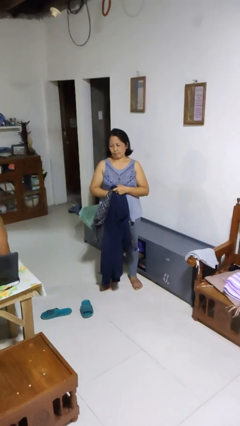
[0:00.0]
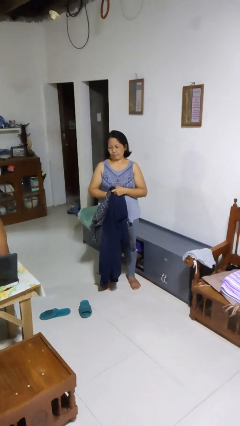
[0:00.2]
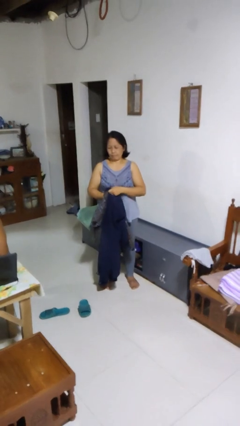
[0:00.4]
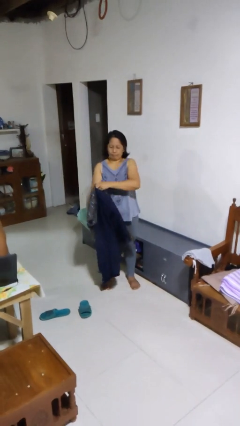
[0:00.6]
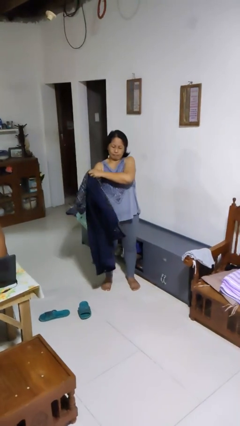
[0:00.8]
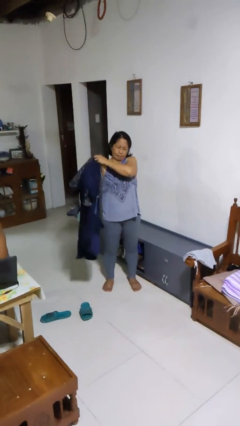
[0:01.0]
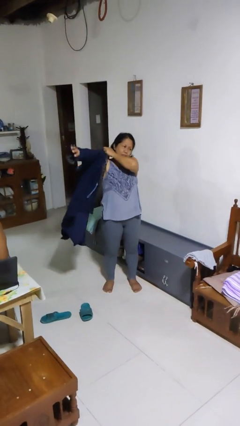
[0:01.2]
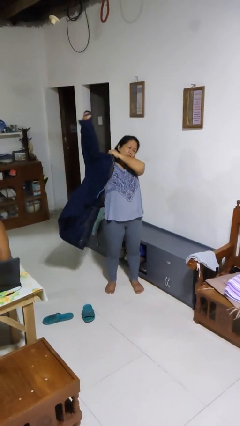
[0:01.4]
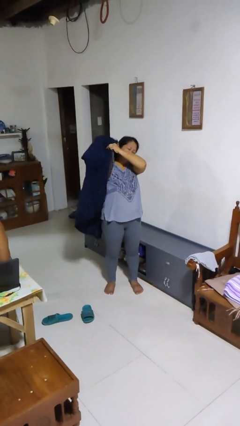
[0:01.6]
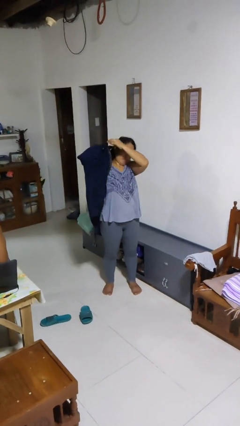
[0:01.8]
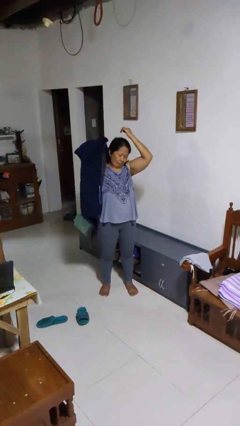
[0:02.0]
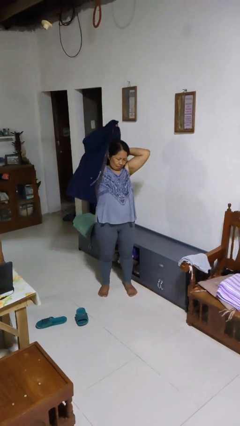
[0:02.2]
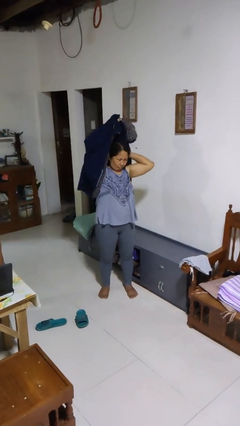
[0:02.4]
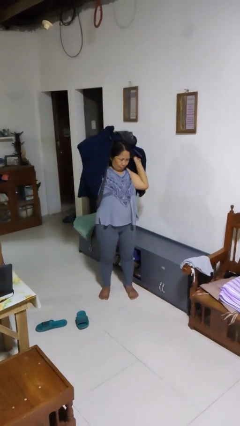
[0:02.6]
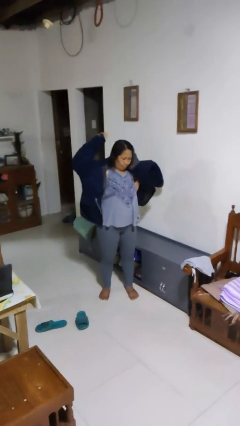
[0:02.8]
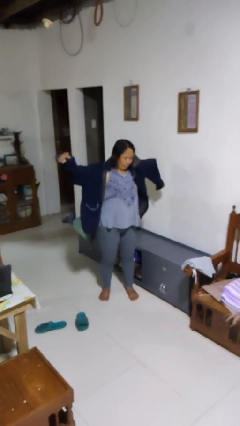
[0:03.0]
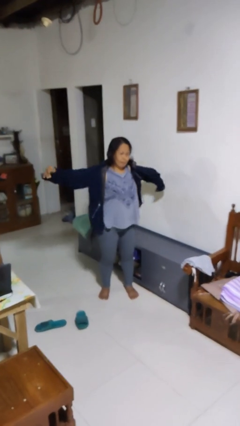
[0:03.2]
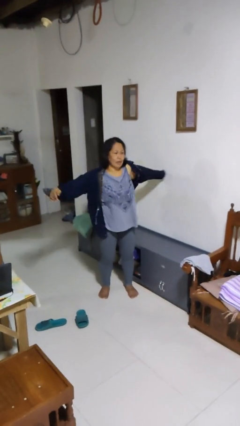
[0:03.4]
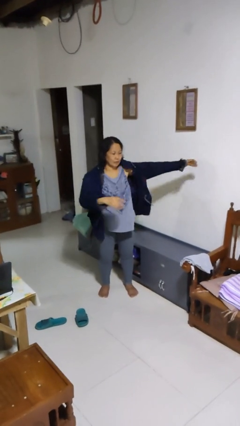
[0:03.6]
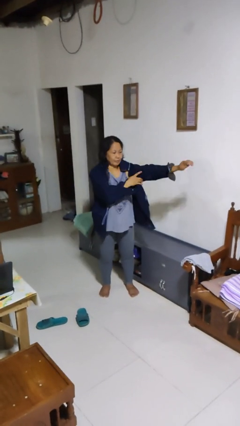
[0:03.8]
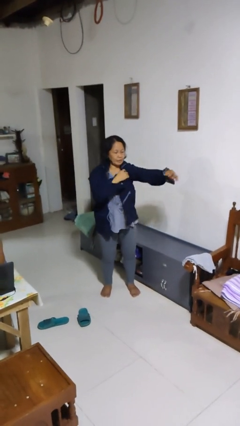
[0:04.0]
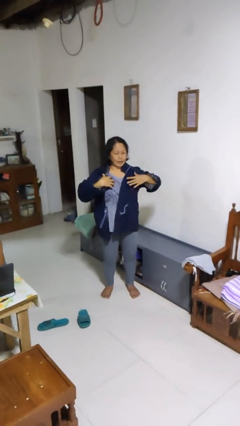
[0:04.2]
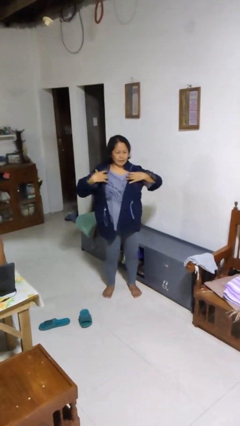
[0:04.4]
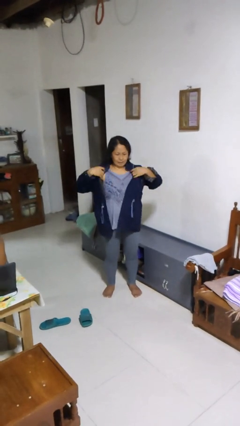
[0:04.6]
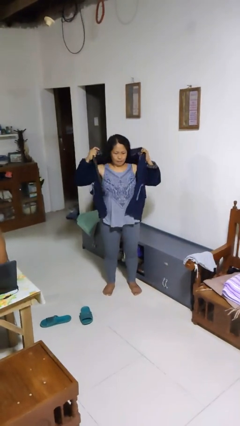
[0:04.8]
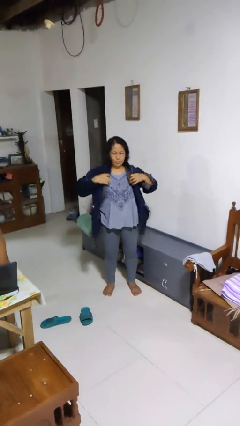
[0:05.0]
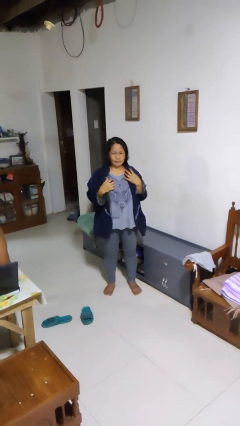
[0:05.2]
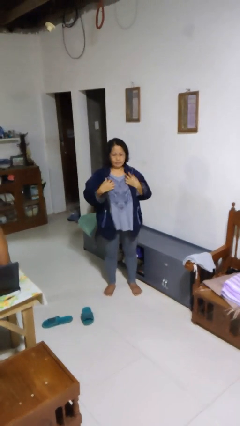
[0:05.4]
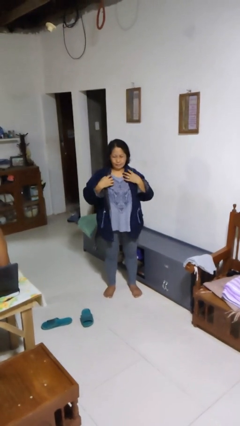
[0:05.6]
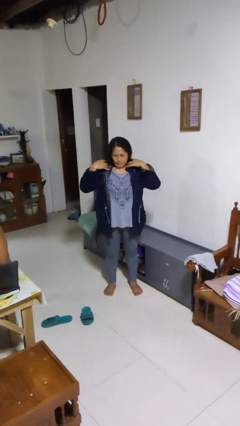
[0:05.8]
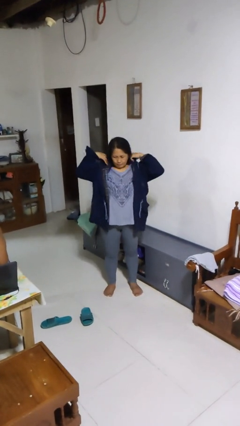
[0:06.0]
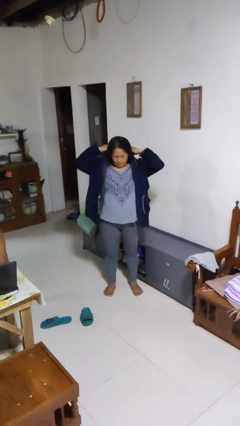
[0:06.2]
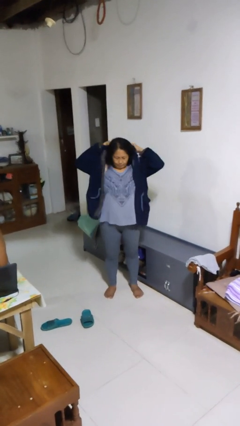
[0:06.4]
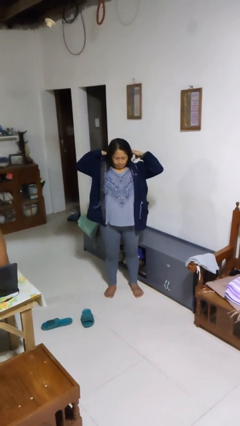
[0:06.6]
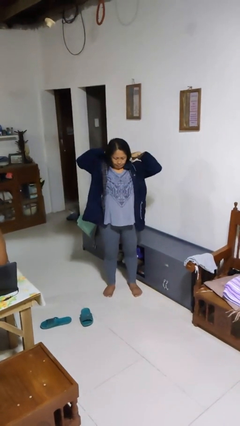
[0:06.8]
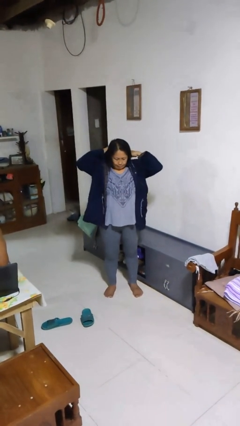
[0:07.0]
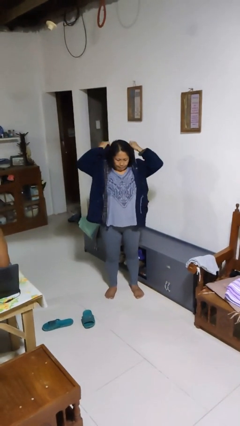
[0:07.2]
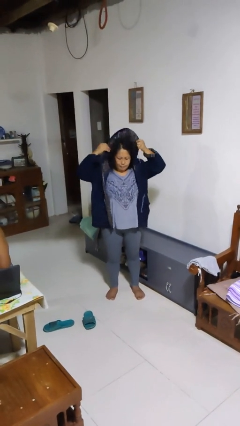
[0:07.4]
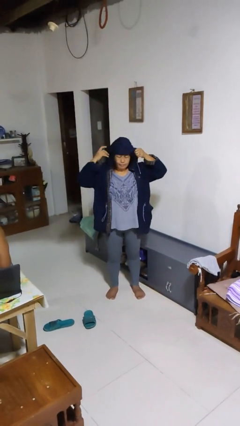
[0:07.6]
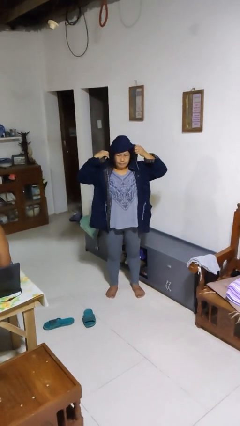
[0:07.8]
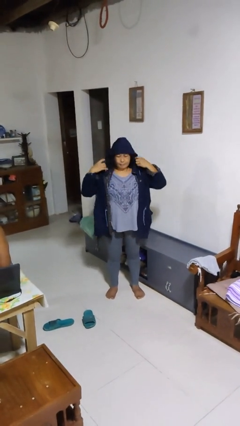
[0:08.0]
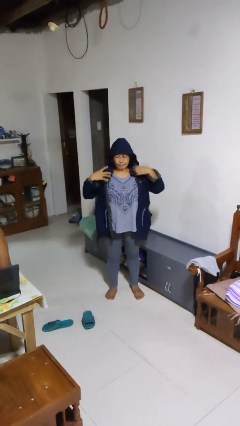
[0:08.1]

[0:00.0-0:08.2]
person puts on hoodie

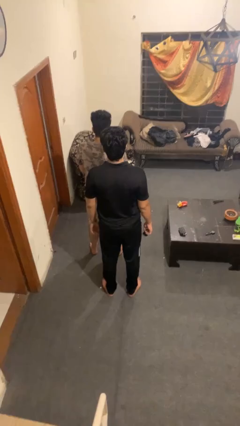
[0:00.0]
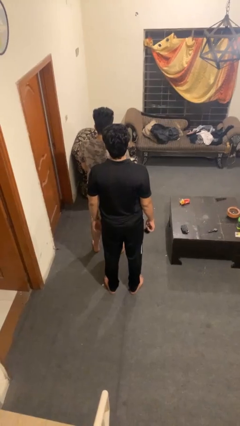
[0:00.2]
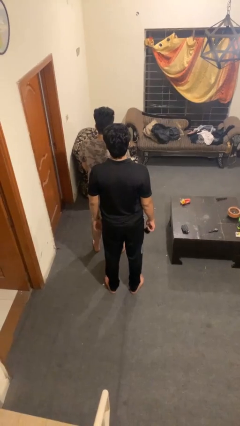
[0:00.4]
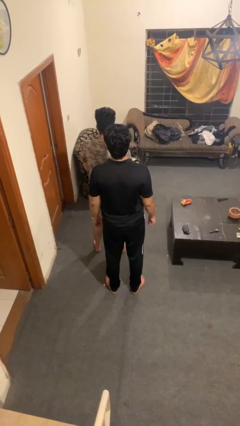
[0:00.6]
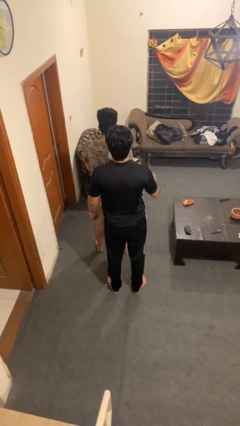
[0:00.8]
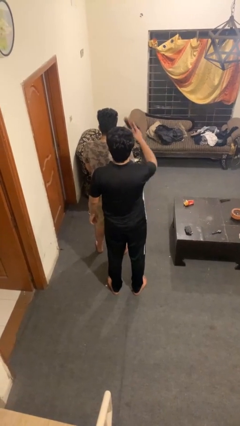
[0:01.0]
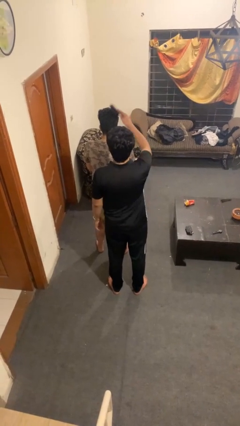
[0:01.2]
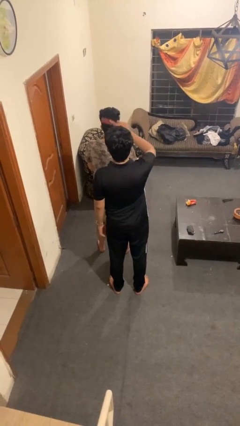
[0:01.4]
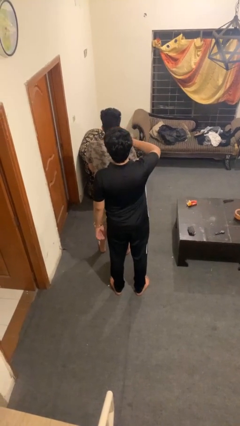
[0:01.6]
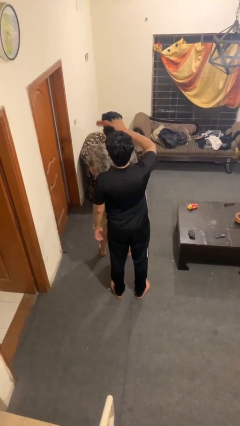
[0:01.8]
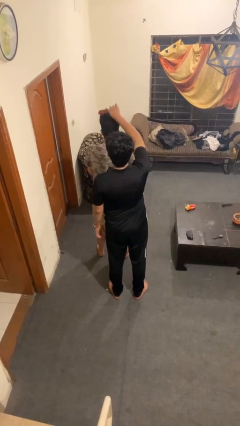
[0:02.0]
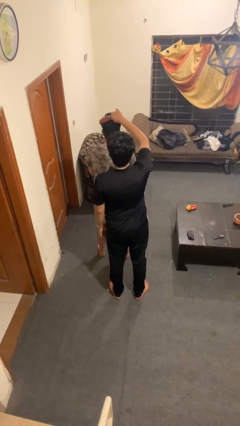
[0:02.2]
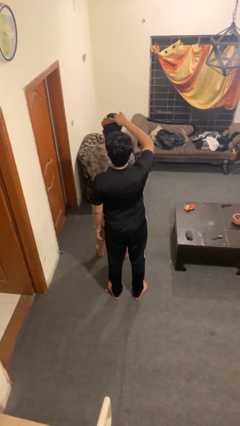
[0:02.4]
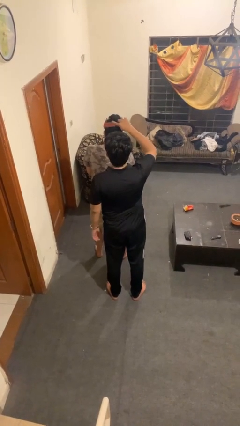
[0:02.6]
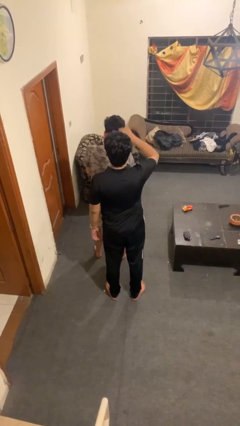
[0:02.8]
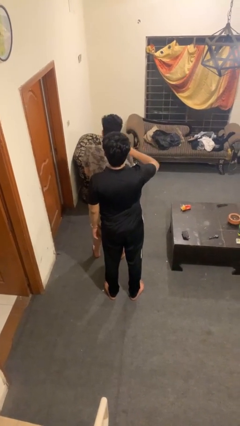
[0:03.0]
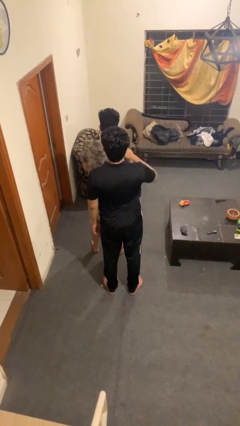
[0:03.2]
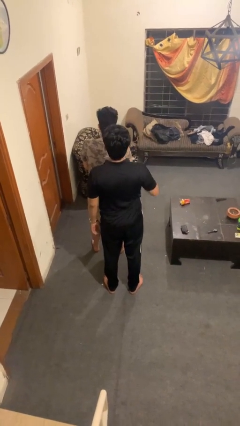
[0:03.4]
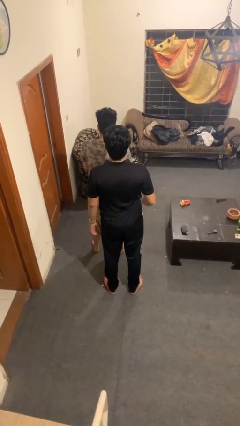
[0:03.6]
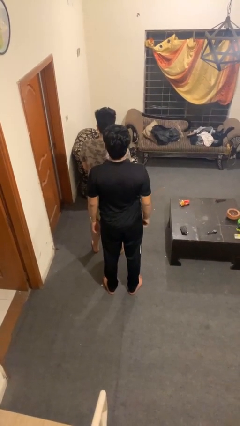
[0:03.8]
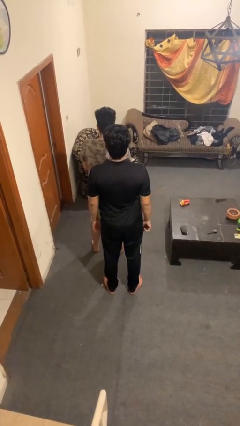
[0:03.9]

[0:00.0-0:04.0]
person brushes hair of person

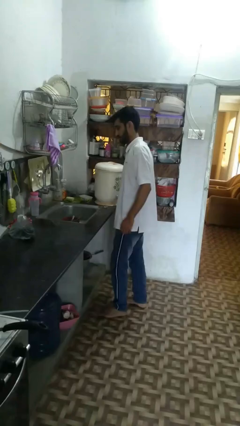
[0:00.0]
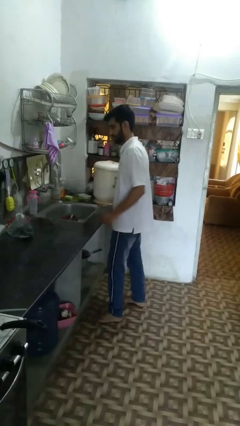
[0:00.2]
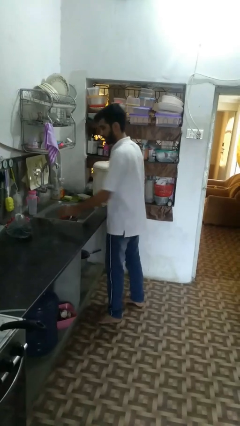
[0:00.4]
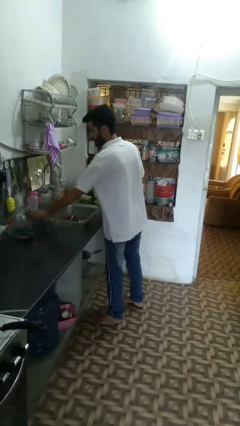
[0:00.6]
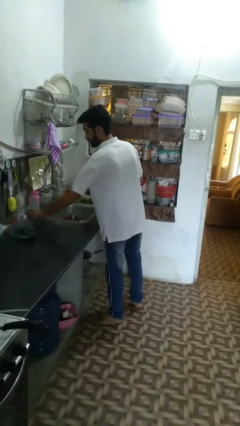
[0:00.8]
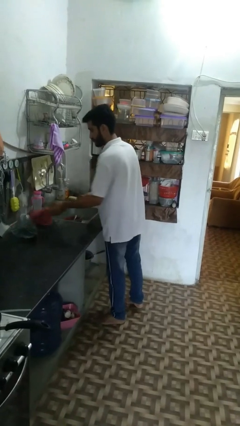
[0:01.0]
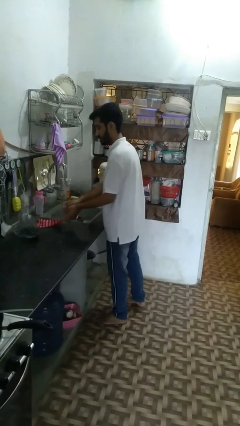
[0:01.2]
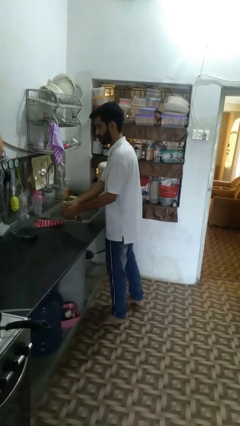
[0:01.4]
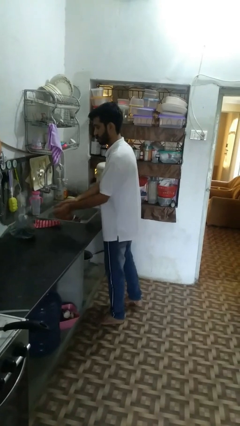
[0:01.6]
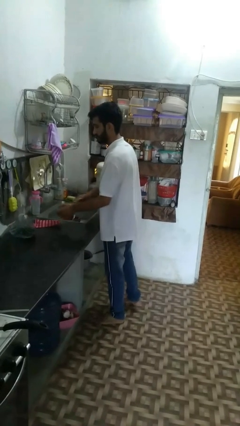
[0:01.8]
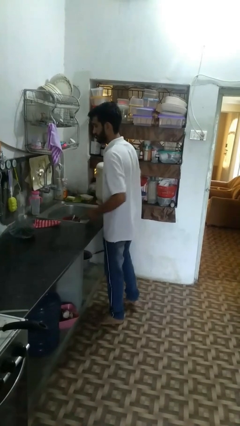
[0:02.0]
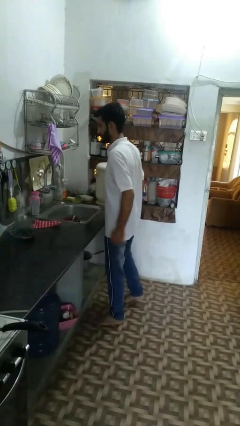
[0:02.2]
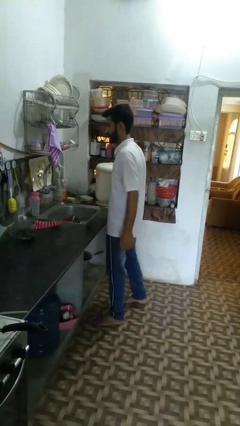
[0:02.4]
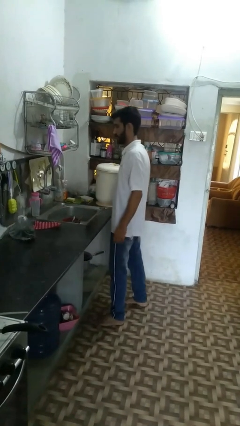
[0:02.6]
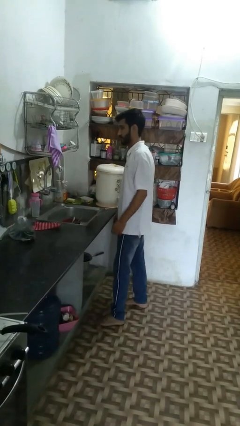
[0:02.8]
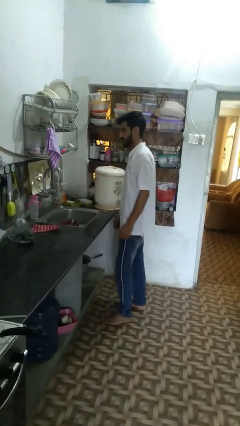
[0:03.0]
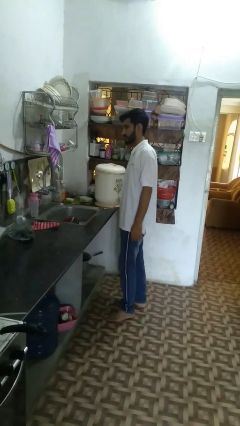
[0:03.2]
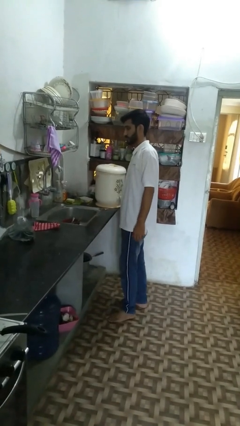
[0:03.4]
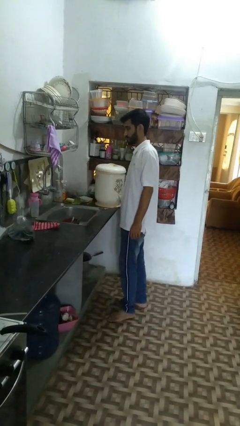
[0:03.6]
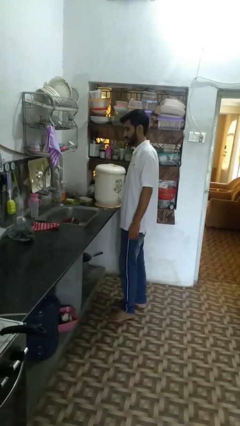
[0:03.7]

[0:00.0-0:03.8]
person dries hands with towel

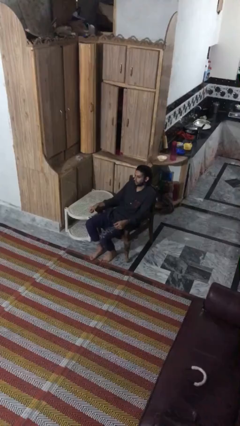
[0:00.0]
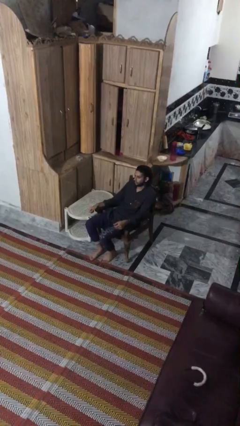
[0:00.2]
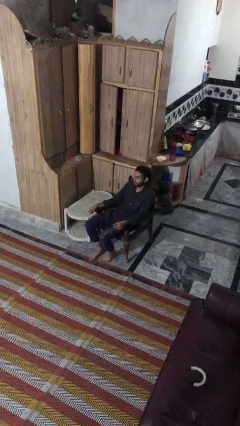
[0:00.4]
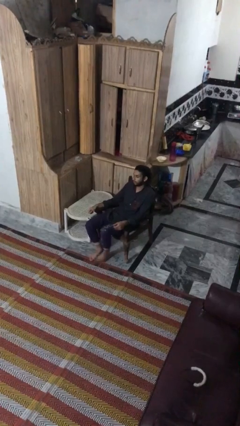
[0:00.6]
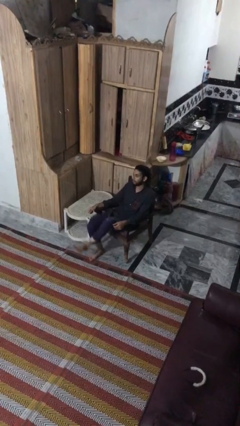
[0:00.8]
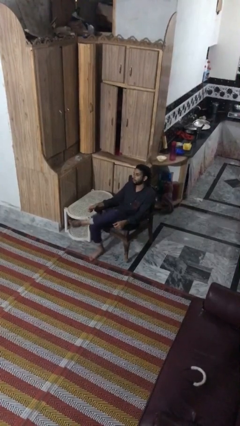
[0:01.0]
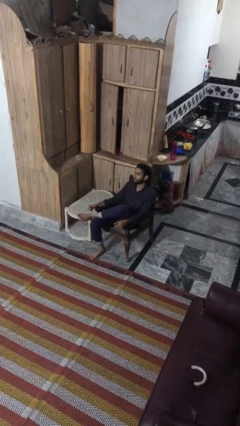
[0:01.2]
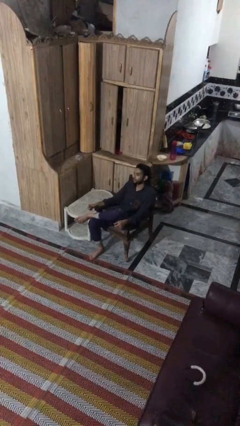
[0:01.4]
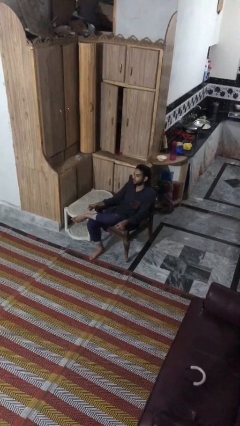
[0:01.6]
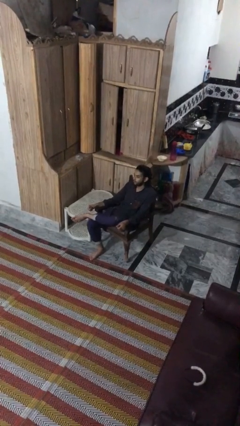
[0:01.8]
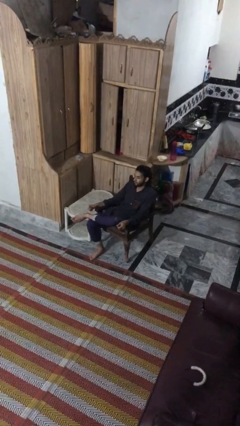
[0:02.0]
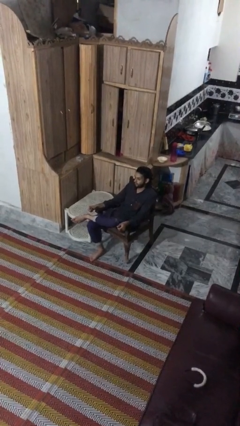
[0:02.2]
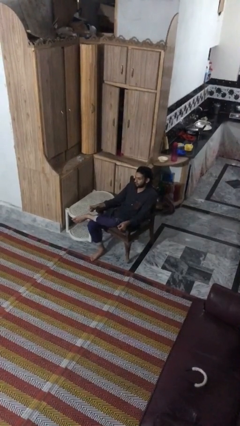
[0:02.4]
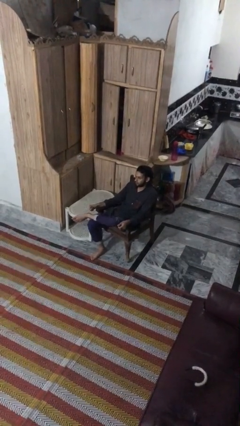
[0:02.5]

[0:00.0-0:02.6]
person crosses legs
